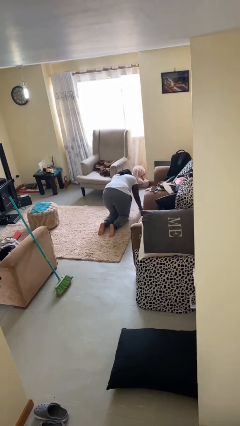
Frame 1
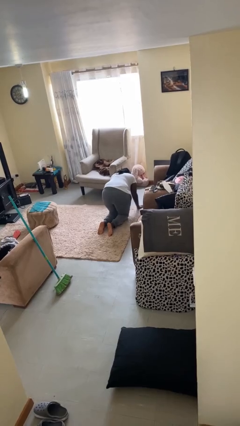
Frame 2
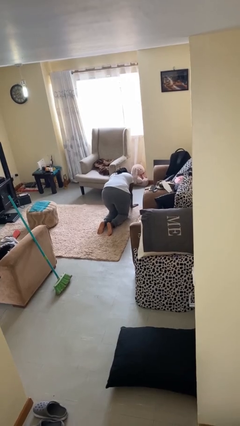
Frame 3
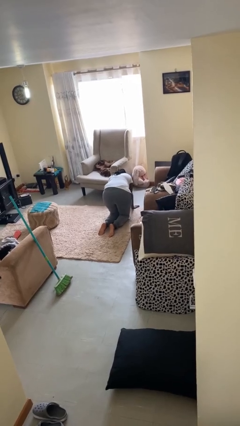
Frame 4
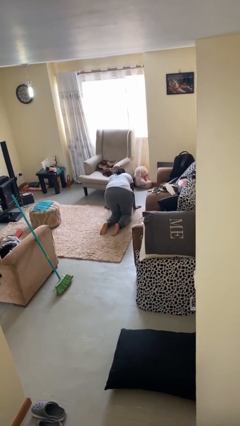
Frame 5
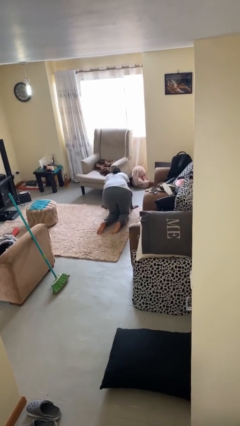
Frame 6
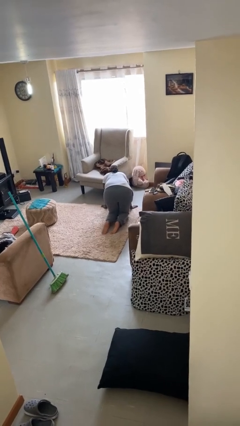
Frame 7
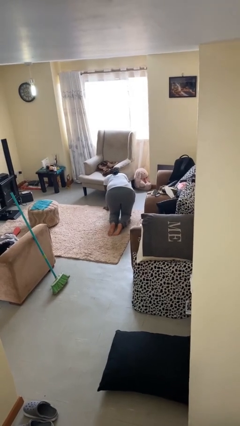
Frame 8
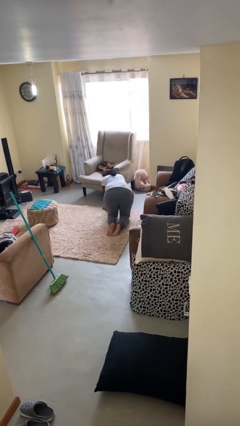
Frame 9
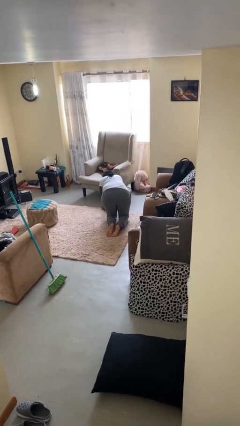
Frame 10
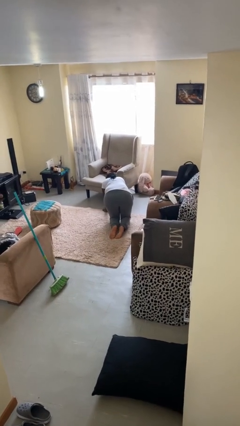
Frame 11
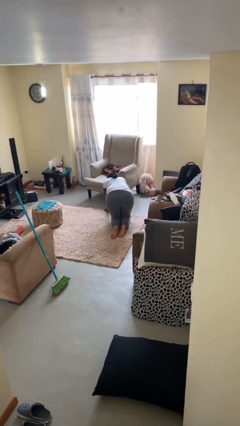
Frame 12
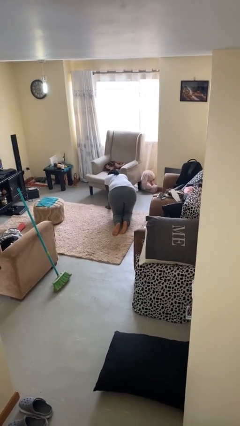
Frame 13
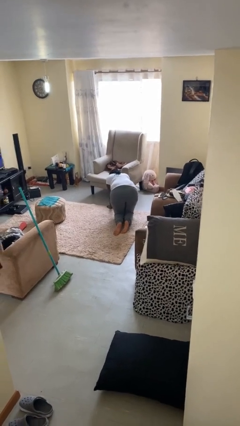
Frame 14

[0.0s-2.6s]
person crawls

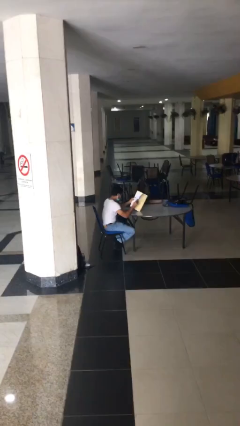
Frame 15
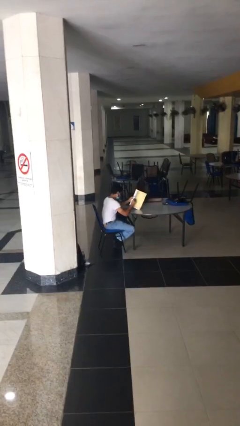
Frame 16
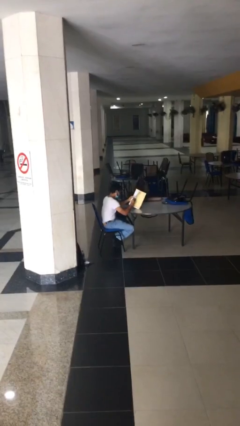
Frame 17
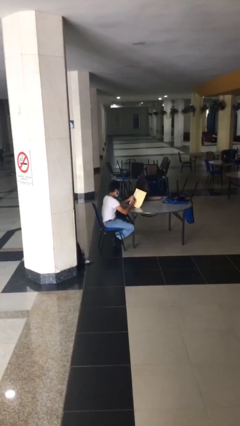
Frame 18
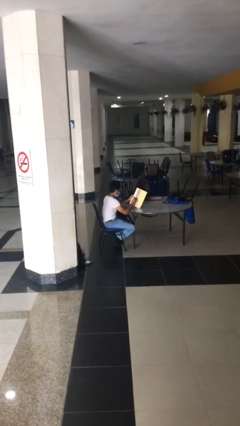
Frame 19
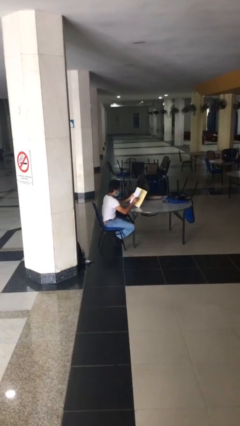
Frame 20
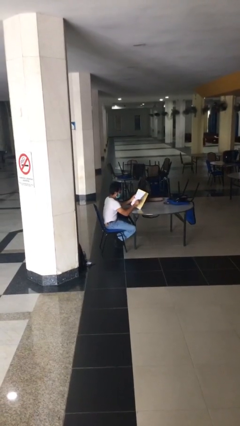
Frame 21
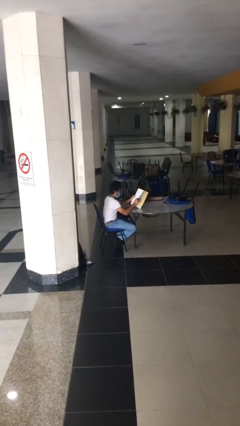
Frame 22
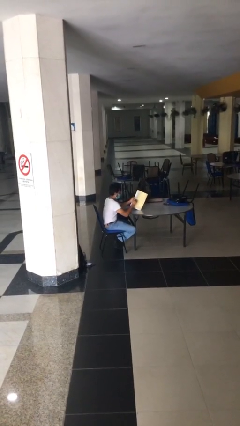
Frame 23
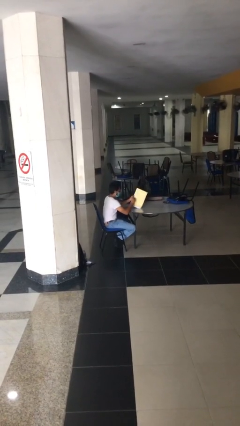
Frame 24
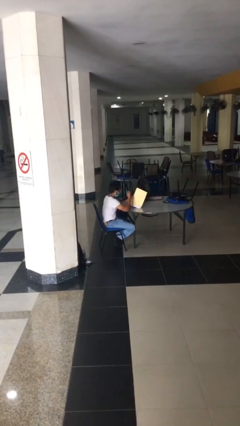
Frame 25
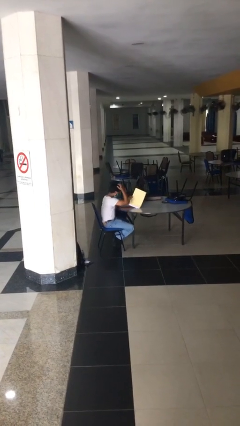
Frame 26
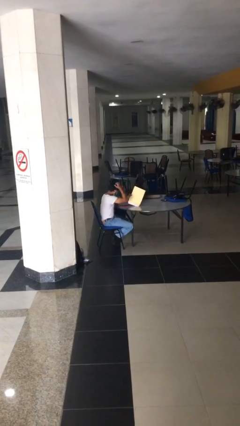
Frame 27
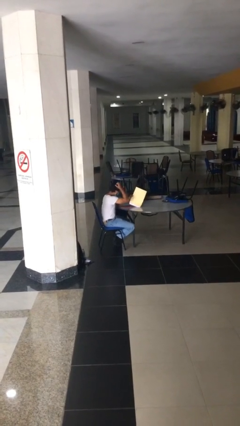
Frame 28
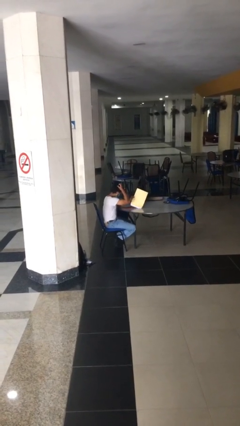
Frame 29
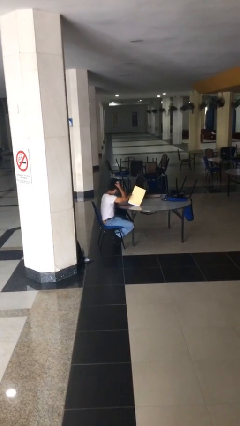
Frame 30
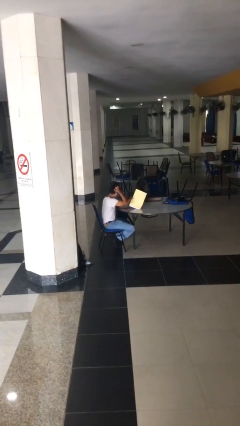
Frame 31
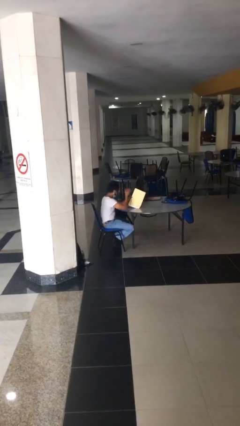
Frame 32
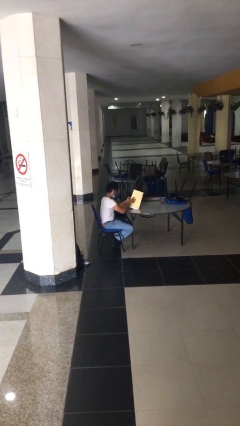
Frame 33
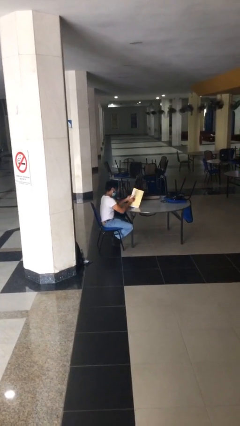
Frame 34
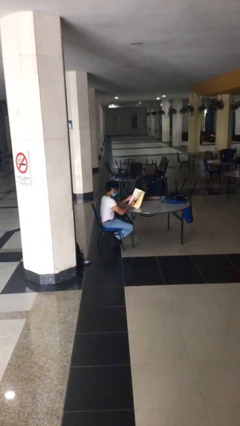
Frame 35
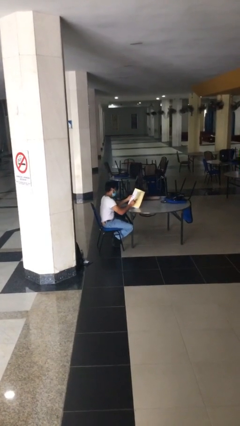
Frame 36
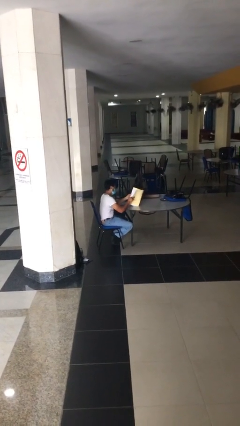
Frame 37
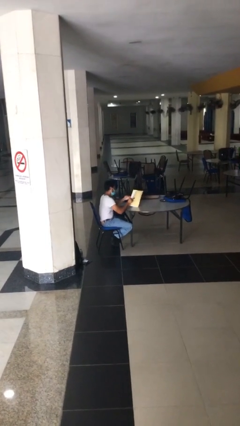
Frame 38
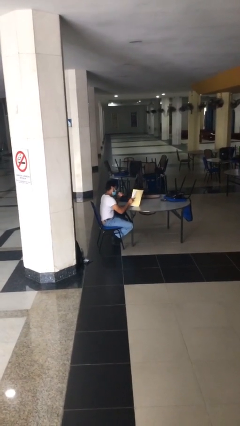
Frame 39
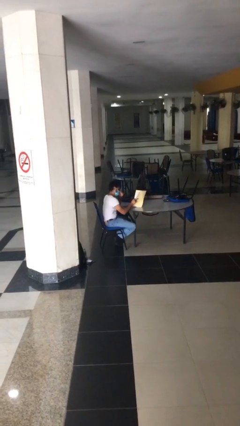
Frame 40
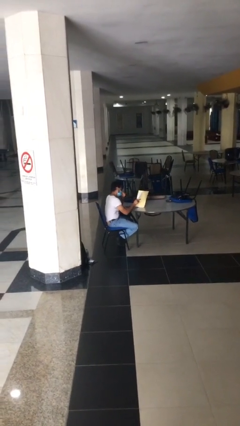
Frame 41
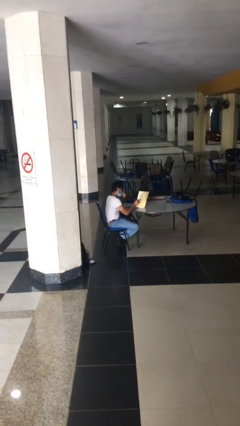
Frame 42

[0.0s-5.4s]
person reads document

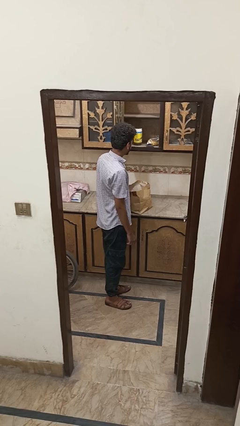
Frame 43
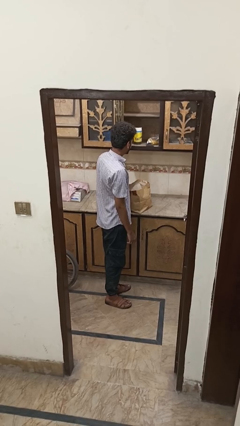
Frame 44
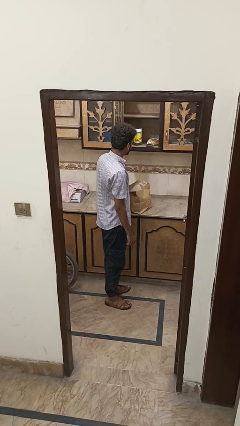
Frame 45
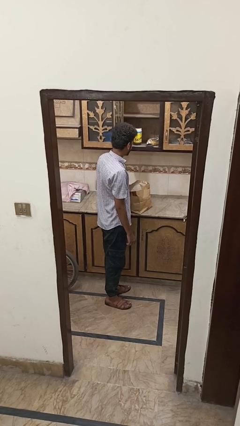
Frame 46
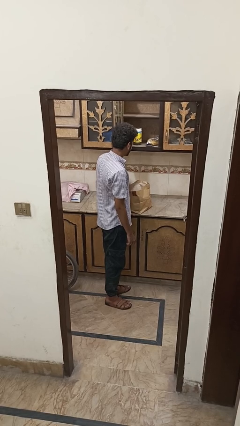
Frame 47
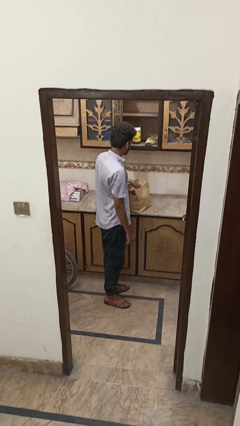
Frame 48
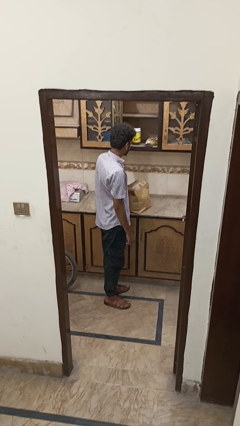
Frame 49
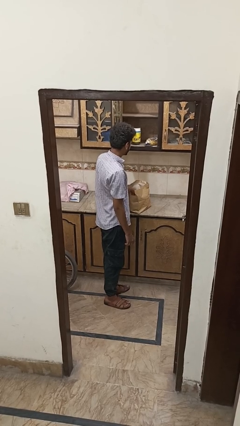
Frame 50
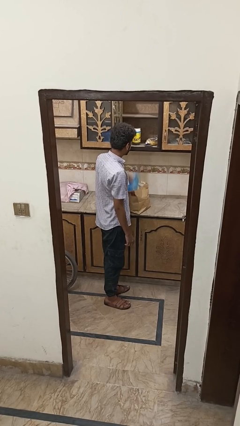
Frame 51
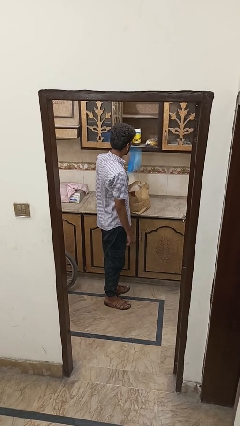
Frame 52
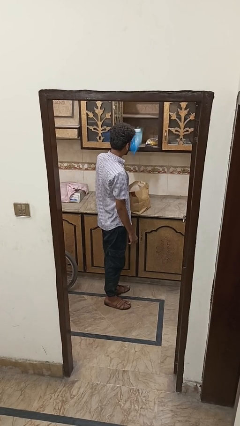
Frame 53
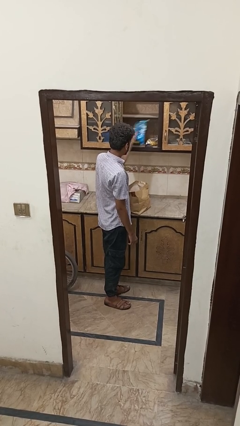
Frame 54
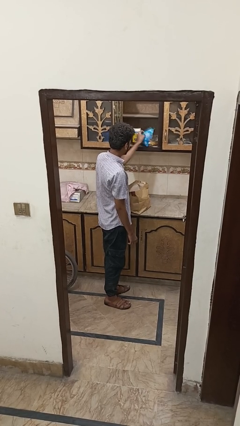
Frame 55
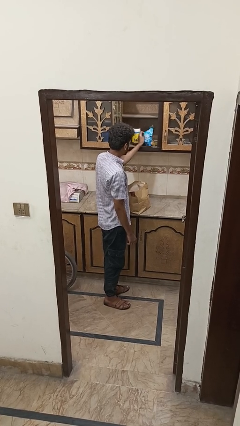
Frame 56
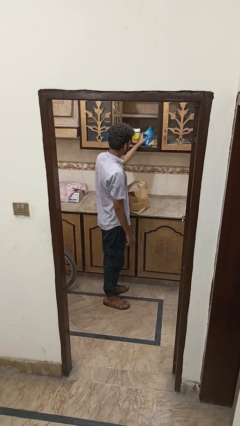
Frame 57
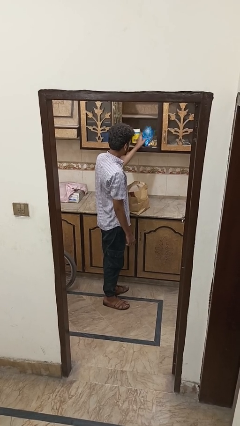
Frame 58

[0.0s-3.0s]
person covers with bedsheets

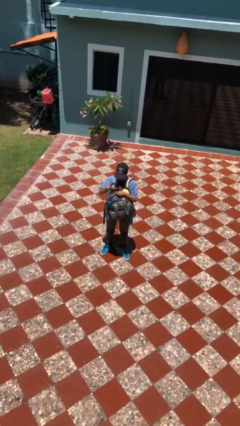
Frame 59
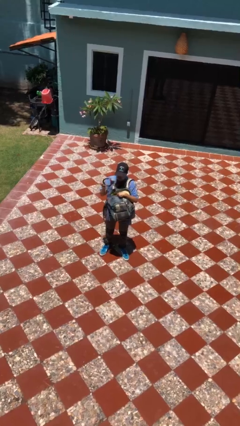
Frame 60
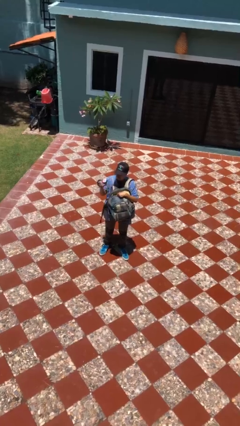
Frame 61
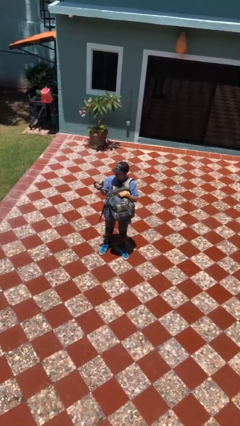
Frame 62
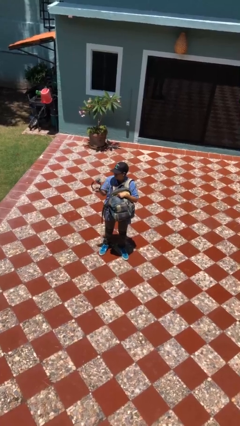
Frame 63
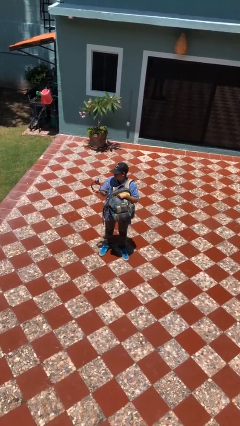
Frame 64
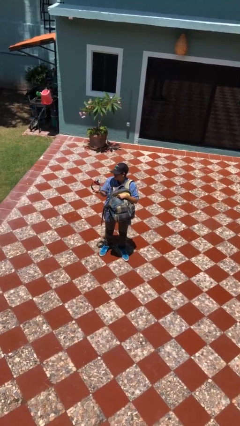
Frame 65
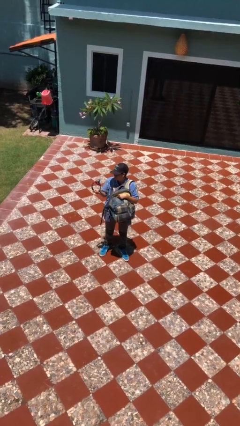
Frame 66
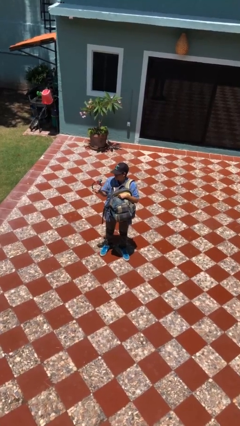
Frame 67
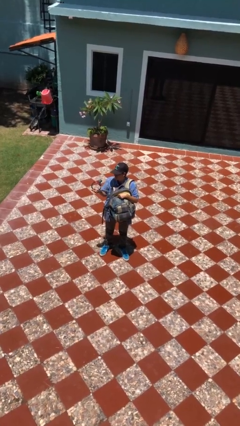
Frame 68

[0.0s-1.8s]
person takes object from backpack

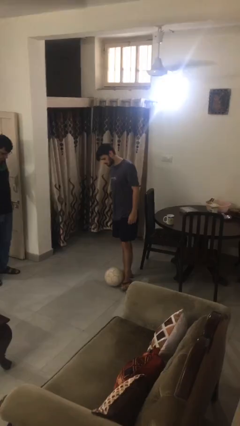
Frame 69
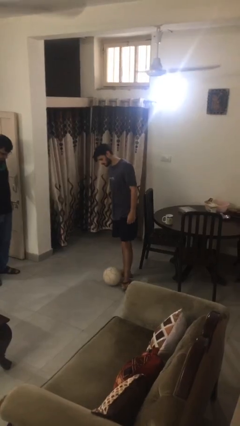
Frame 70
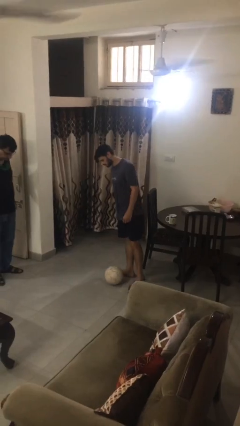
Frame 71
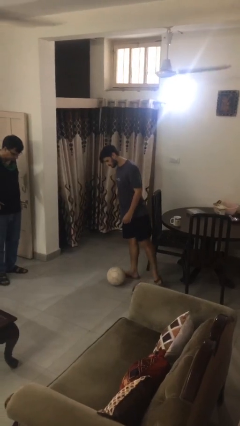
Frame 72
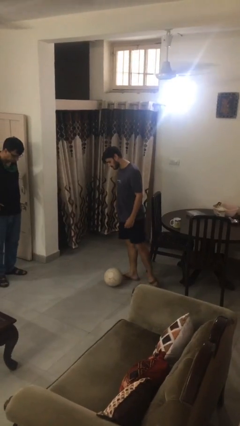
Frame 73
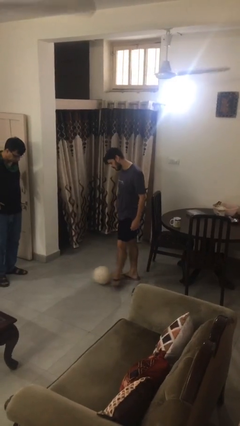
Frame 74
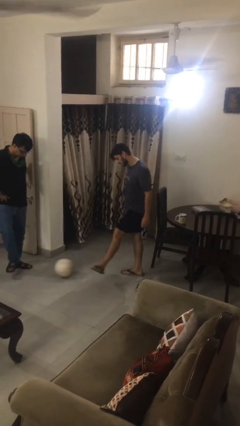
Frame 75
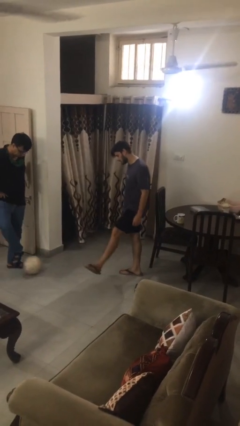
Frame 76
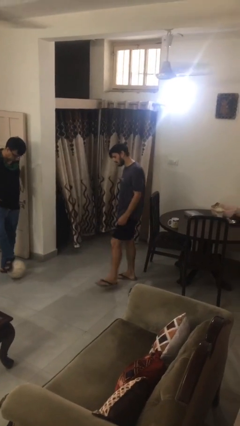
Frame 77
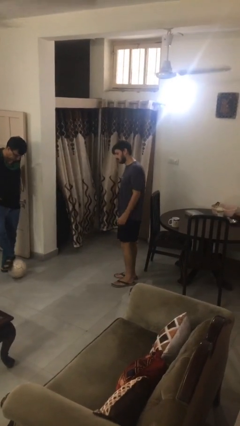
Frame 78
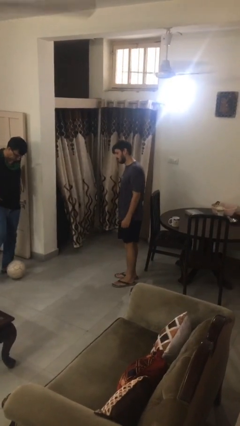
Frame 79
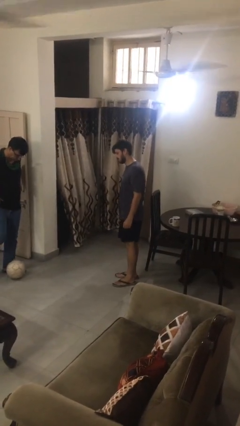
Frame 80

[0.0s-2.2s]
person kicks object to person

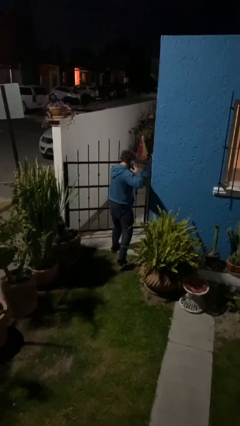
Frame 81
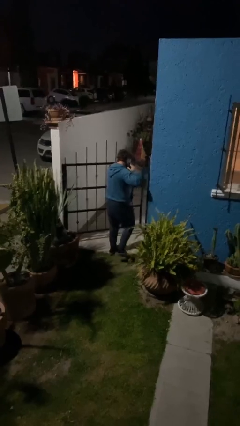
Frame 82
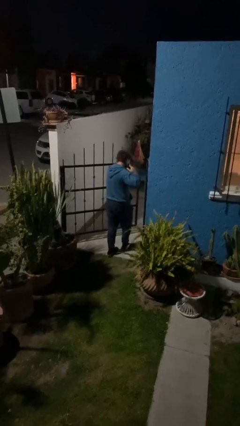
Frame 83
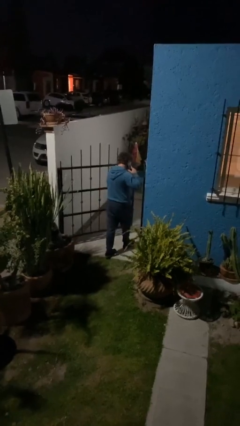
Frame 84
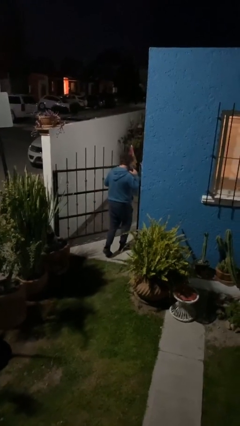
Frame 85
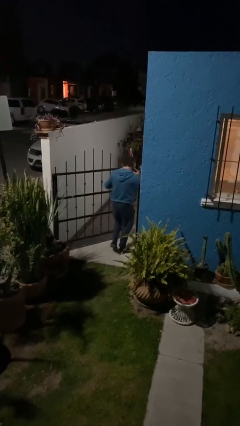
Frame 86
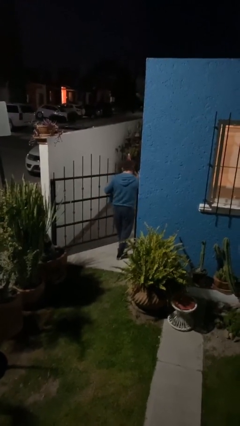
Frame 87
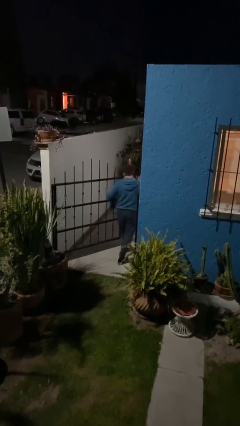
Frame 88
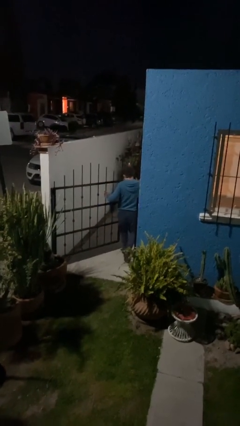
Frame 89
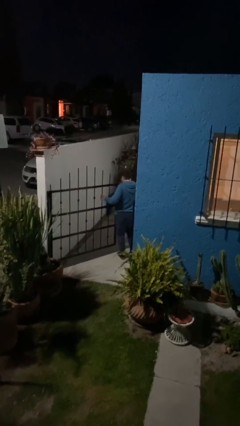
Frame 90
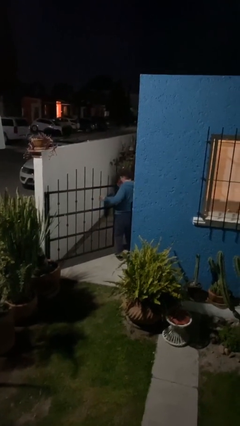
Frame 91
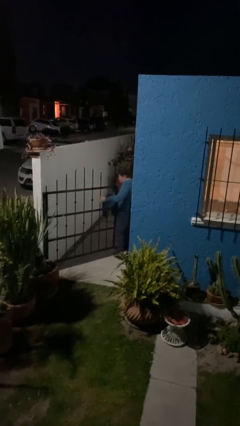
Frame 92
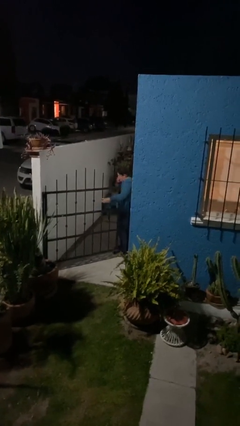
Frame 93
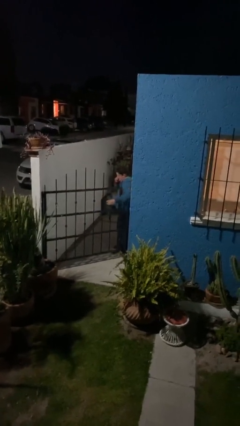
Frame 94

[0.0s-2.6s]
person exits scene through structure
